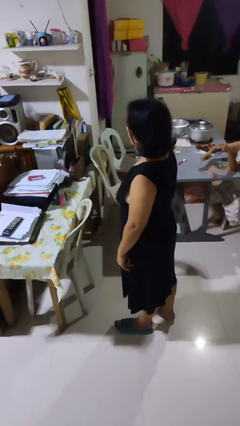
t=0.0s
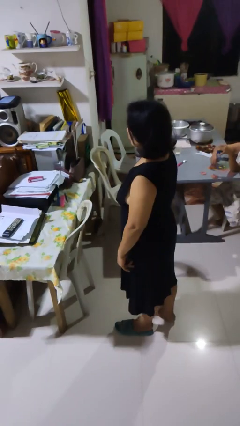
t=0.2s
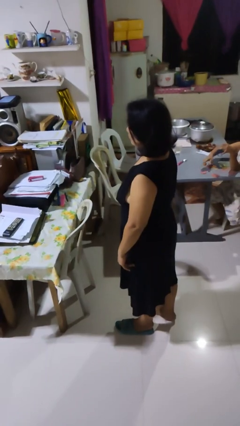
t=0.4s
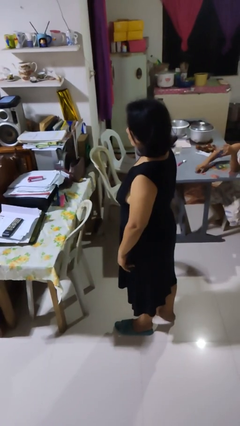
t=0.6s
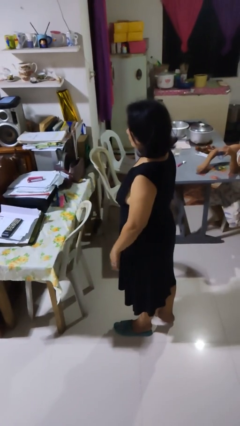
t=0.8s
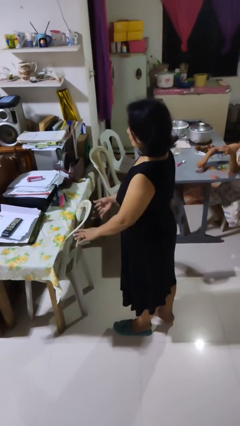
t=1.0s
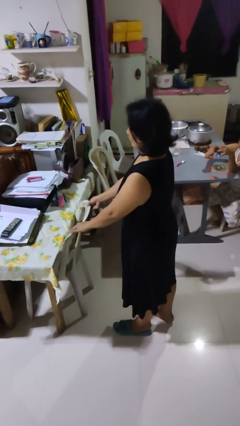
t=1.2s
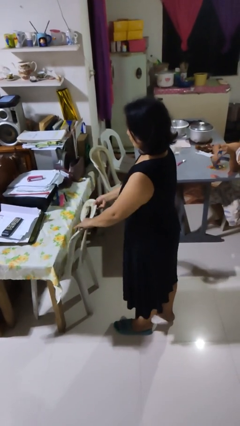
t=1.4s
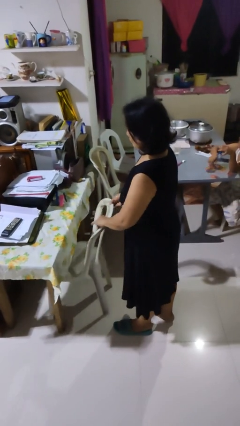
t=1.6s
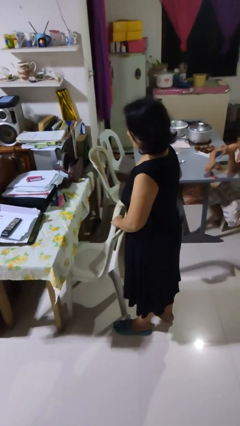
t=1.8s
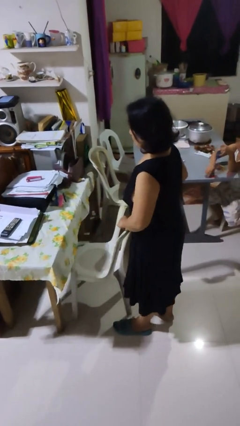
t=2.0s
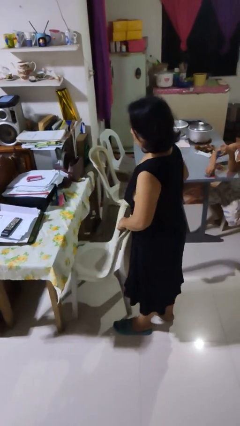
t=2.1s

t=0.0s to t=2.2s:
person pulls out chair

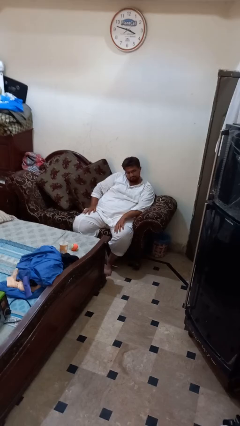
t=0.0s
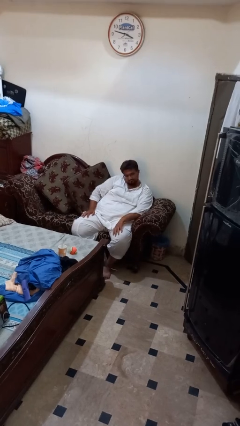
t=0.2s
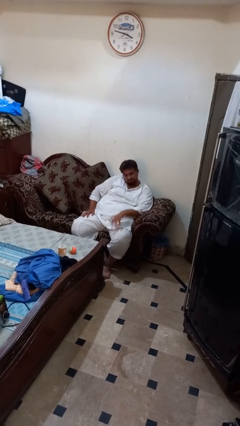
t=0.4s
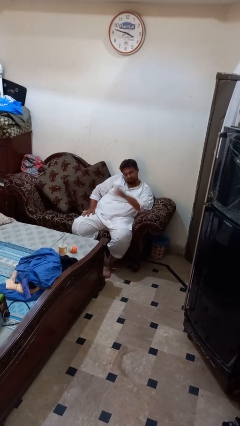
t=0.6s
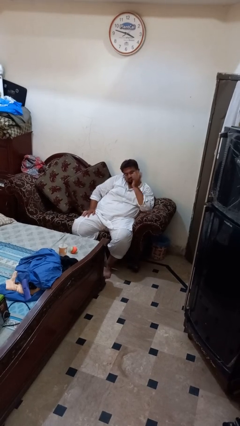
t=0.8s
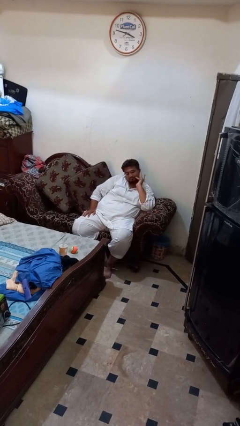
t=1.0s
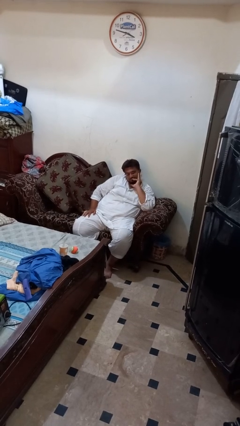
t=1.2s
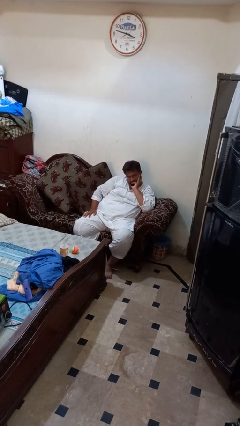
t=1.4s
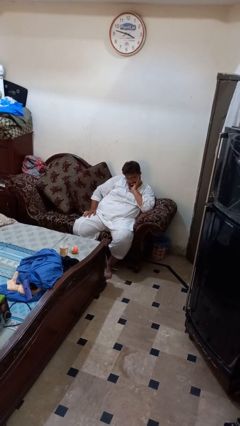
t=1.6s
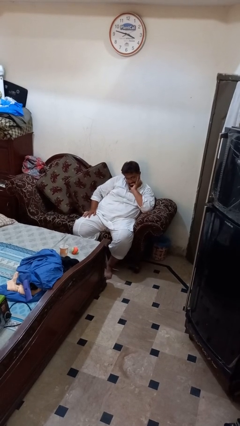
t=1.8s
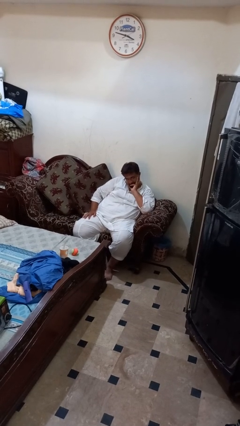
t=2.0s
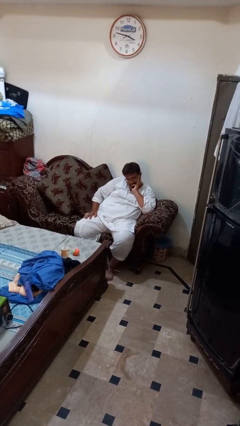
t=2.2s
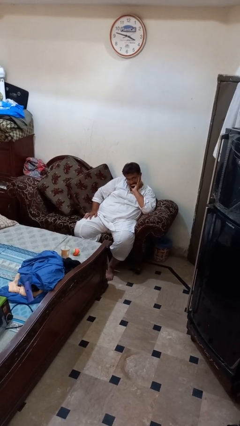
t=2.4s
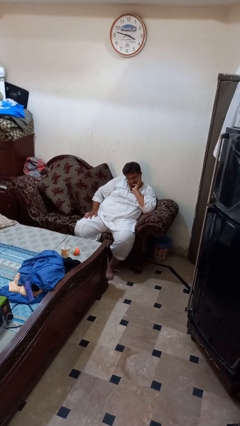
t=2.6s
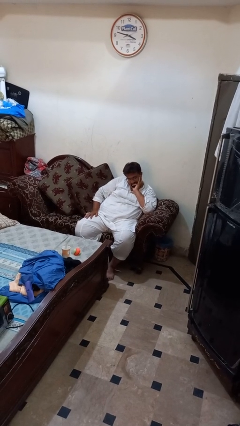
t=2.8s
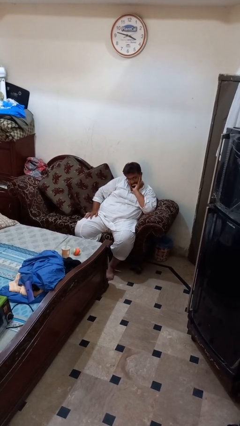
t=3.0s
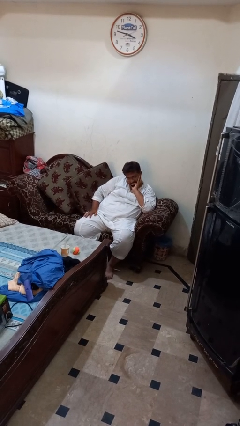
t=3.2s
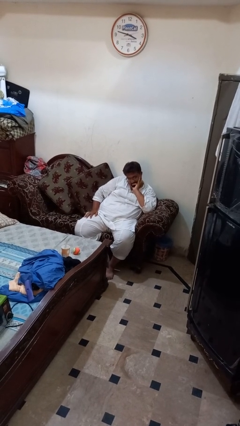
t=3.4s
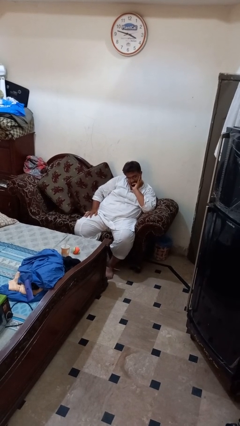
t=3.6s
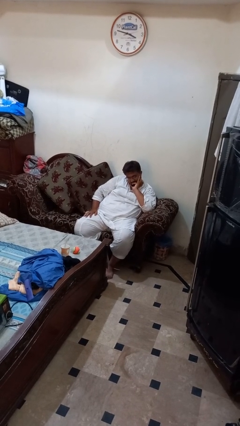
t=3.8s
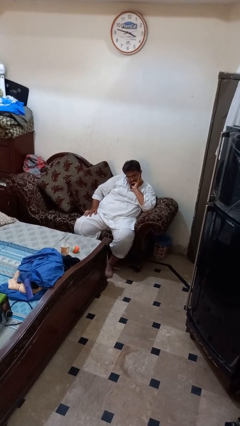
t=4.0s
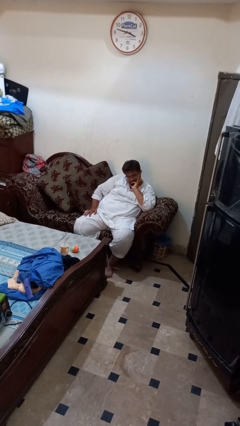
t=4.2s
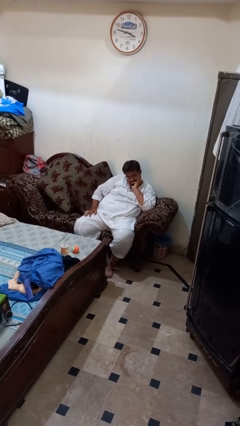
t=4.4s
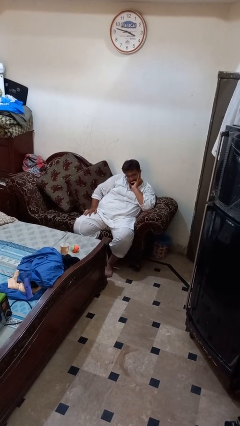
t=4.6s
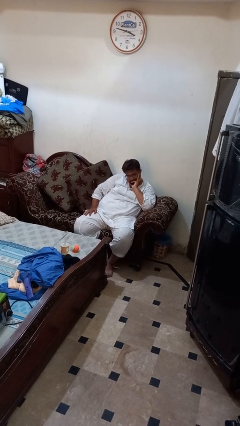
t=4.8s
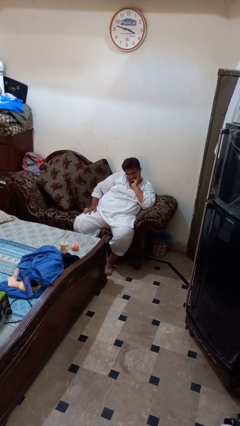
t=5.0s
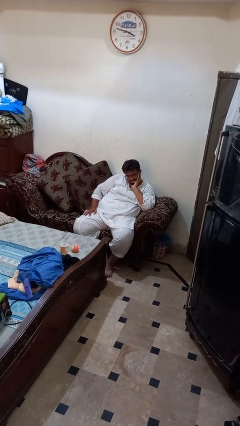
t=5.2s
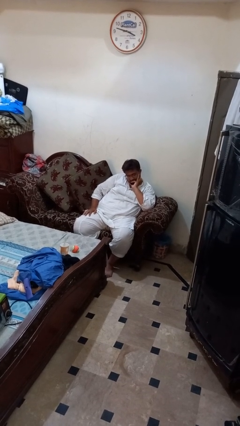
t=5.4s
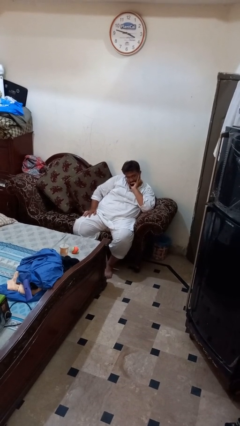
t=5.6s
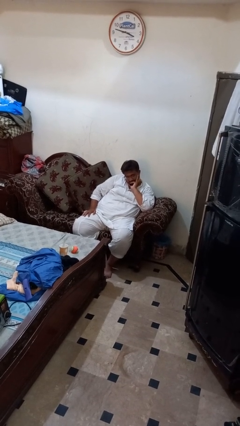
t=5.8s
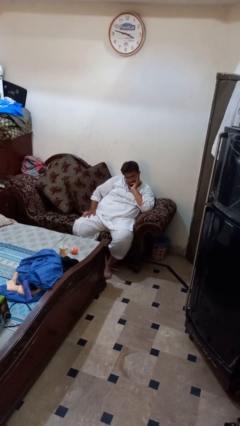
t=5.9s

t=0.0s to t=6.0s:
person strokes chin

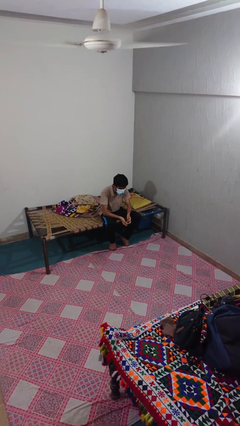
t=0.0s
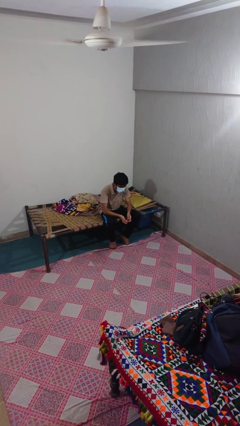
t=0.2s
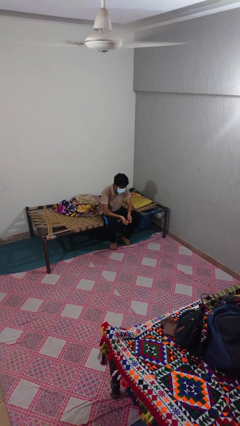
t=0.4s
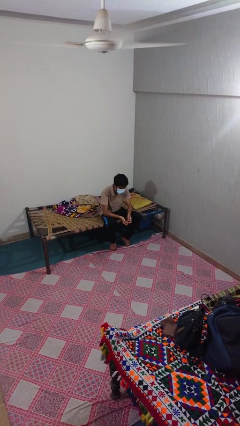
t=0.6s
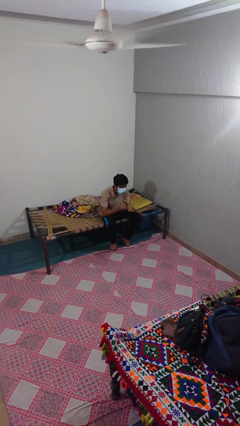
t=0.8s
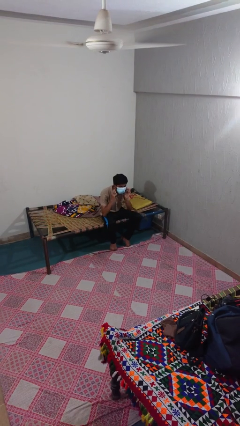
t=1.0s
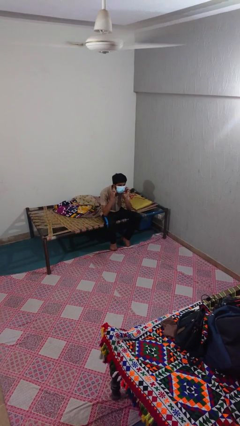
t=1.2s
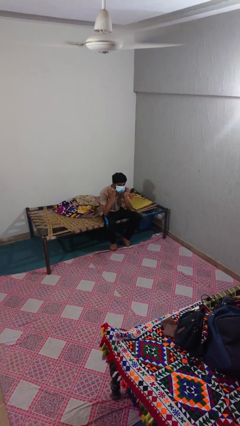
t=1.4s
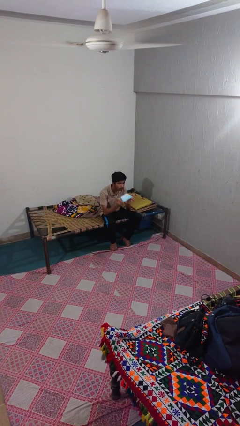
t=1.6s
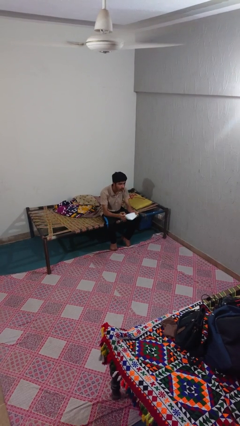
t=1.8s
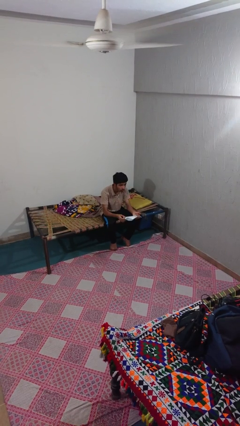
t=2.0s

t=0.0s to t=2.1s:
person takes off facemask

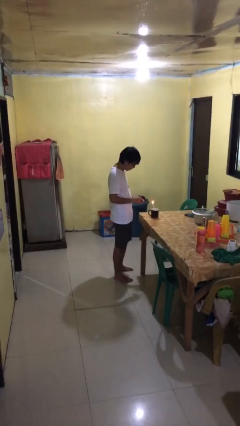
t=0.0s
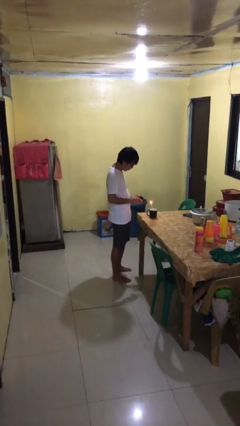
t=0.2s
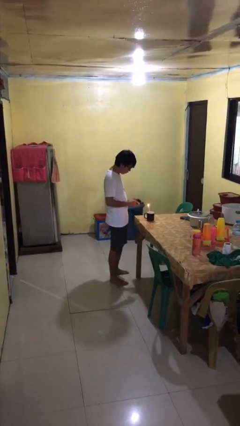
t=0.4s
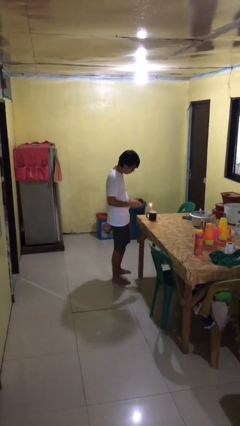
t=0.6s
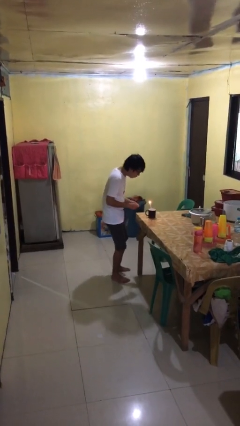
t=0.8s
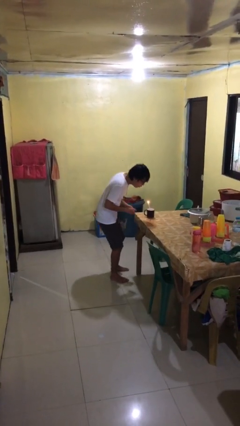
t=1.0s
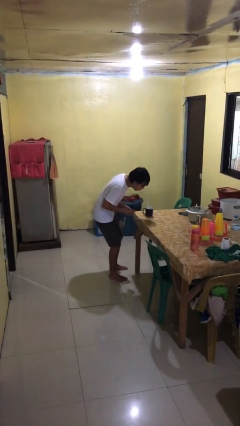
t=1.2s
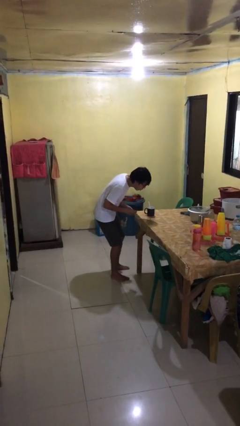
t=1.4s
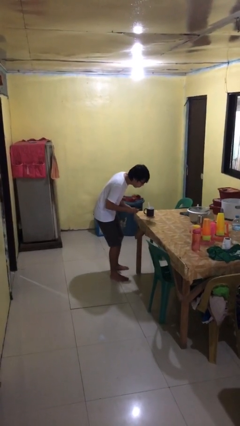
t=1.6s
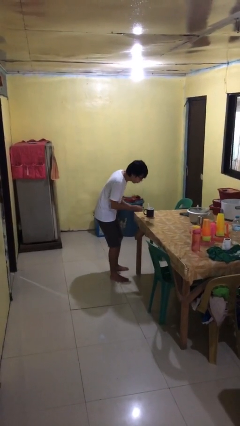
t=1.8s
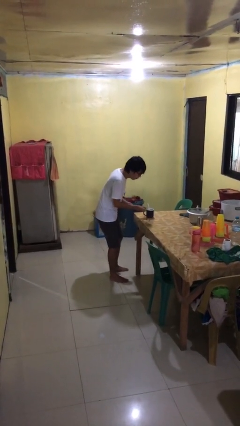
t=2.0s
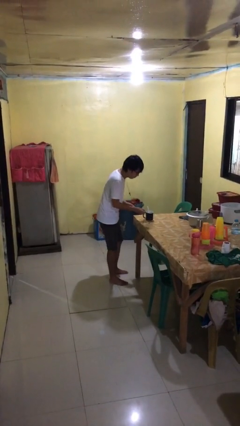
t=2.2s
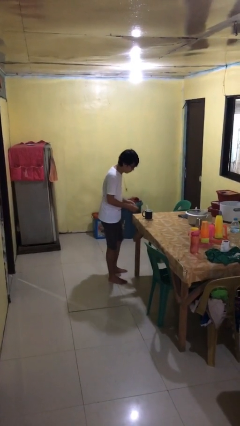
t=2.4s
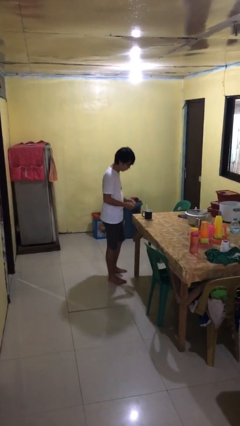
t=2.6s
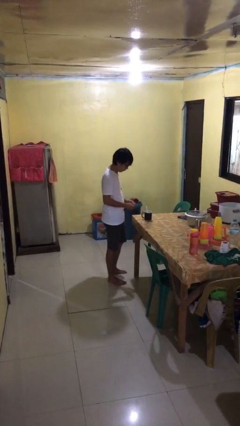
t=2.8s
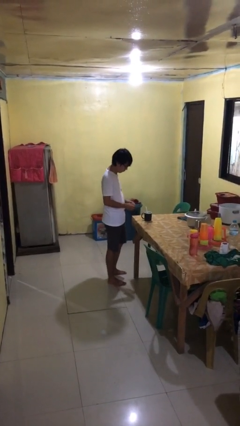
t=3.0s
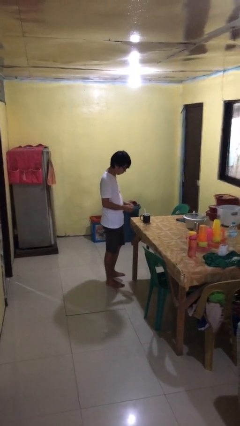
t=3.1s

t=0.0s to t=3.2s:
person extinguishes candle

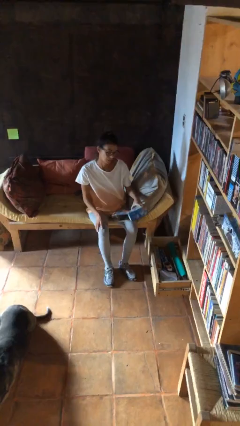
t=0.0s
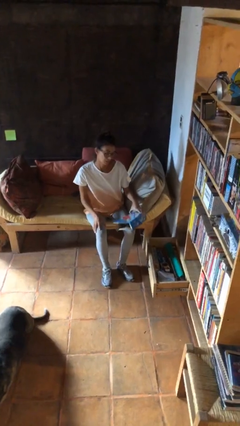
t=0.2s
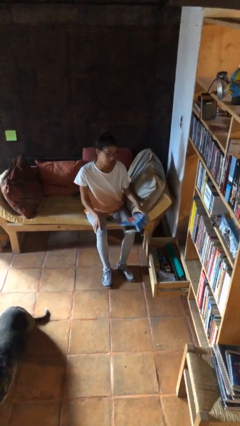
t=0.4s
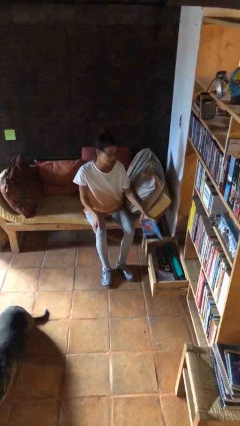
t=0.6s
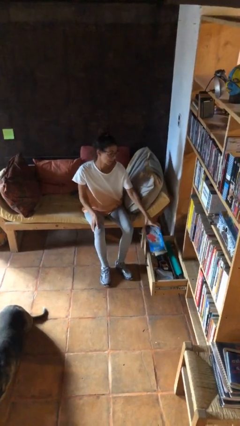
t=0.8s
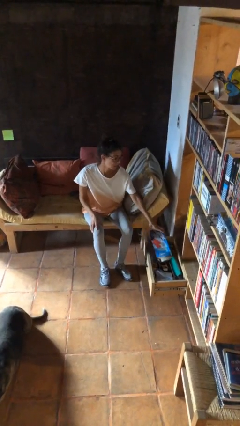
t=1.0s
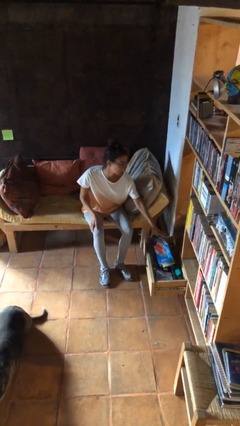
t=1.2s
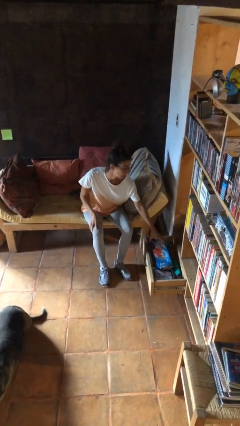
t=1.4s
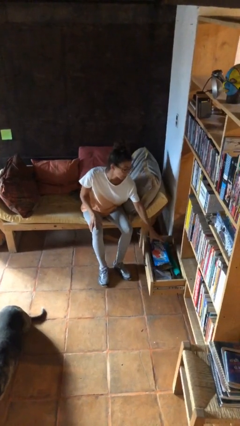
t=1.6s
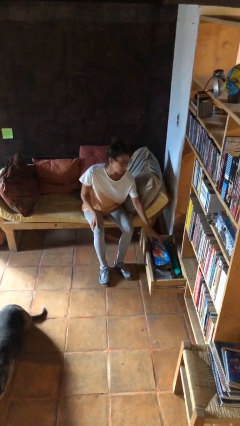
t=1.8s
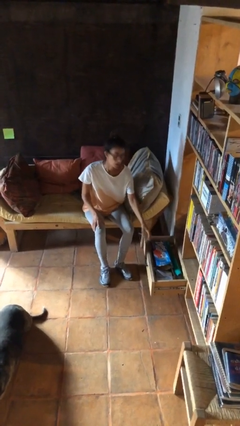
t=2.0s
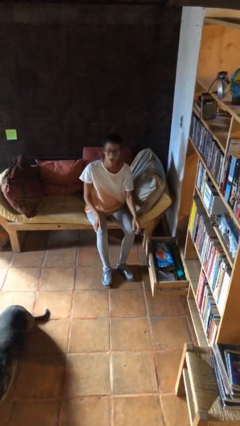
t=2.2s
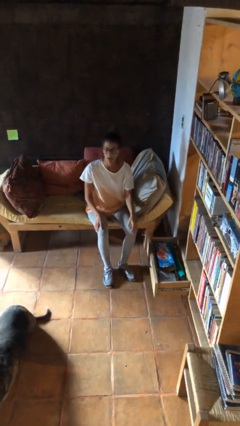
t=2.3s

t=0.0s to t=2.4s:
person puts down object into cabinet

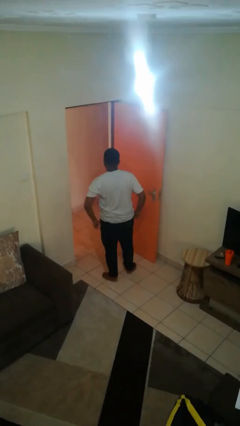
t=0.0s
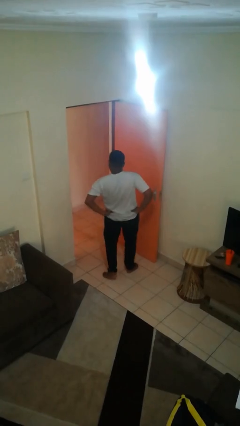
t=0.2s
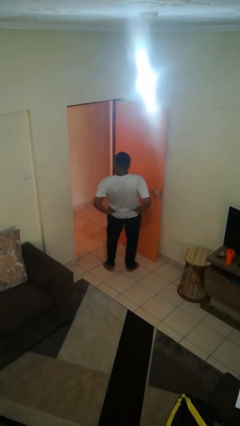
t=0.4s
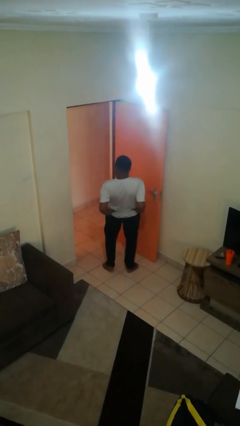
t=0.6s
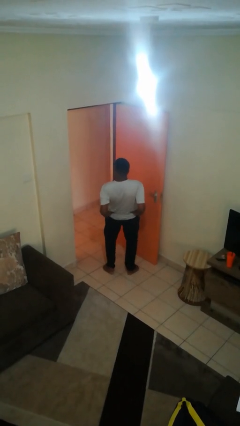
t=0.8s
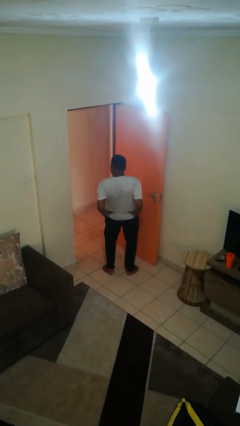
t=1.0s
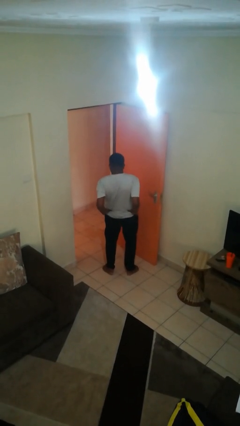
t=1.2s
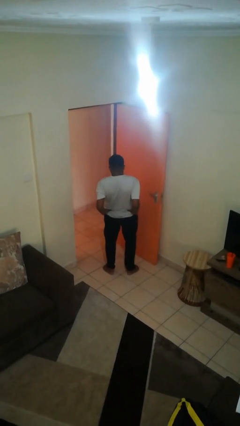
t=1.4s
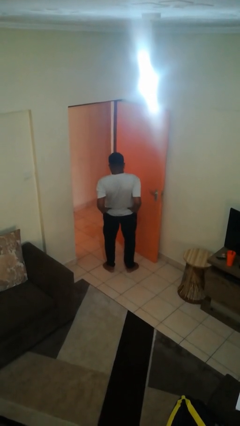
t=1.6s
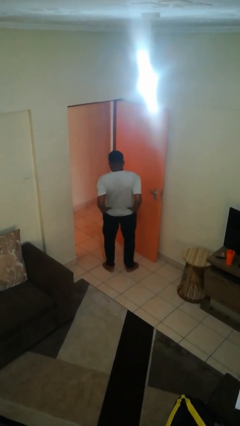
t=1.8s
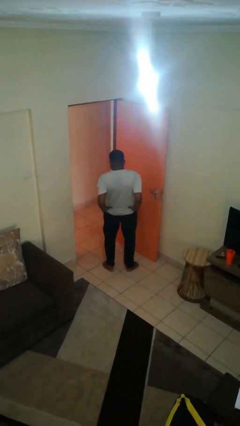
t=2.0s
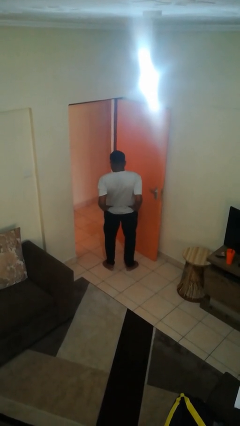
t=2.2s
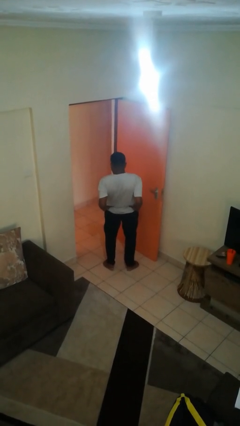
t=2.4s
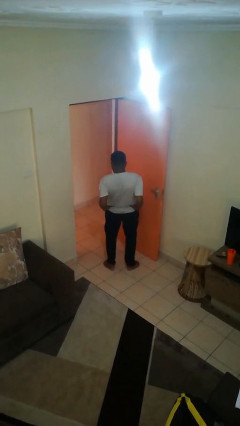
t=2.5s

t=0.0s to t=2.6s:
person stretches back
